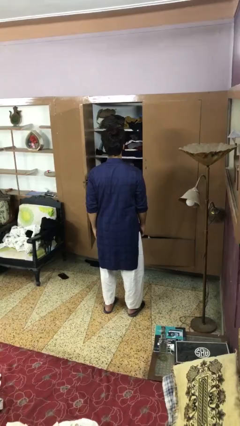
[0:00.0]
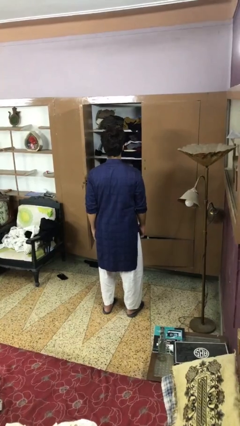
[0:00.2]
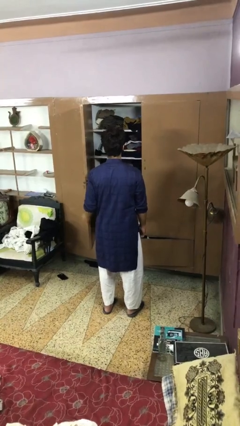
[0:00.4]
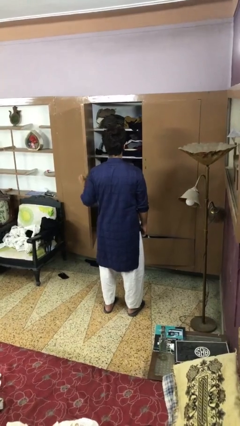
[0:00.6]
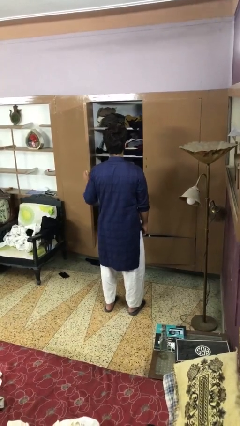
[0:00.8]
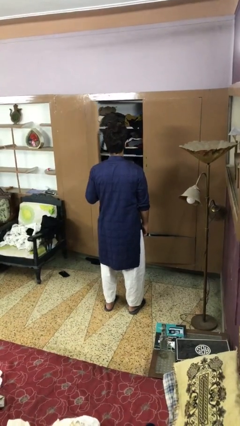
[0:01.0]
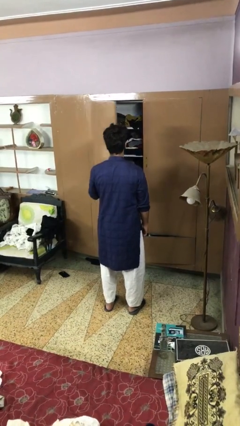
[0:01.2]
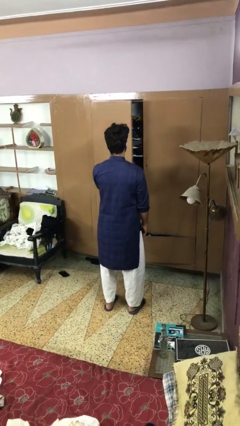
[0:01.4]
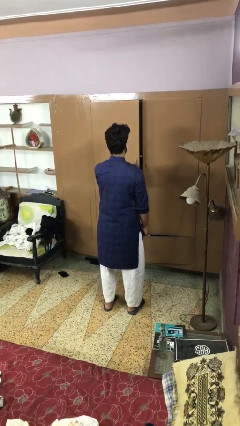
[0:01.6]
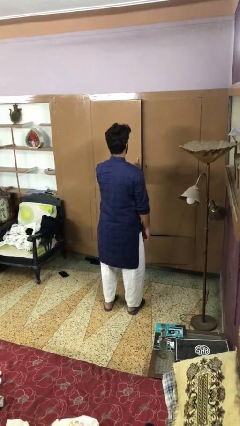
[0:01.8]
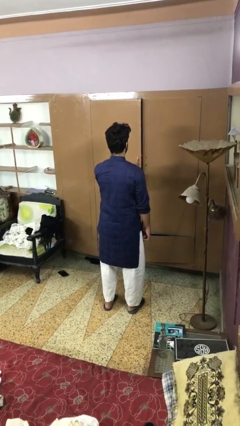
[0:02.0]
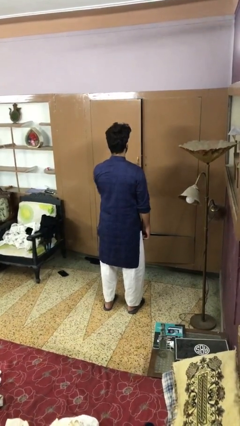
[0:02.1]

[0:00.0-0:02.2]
person closes closet door

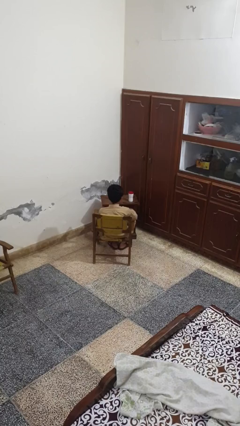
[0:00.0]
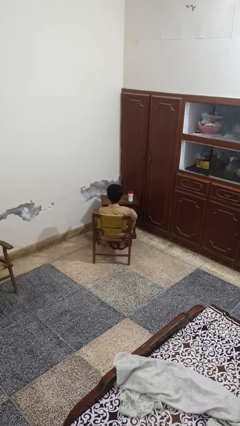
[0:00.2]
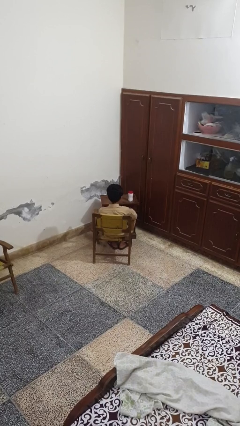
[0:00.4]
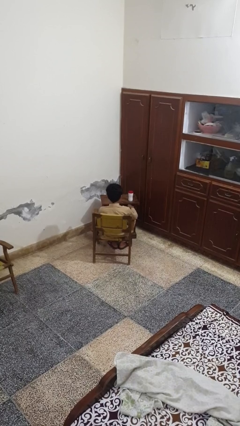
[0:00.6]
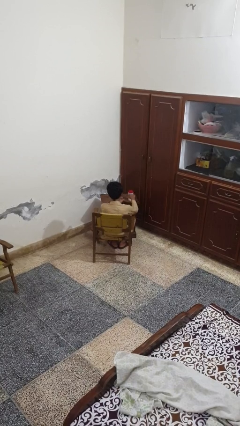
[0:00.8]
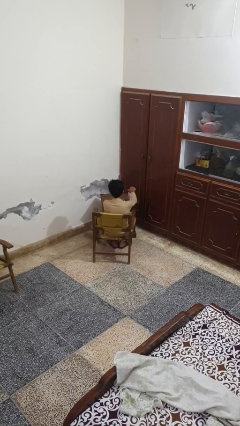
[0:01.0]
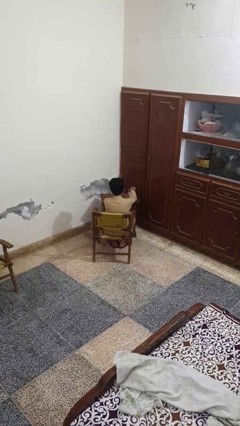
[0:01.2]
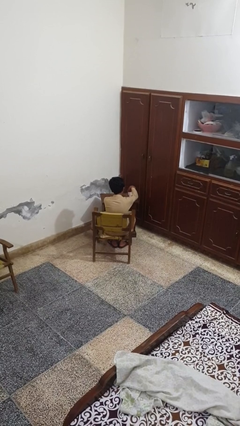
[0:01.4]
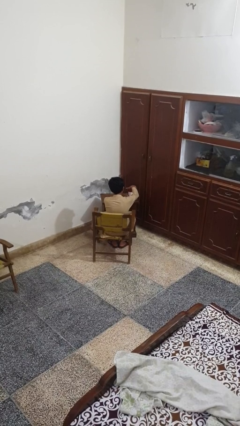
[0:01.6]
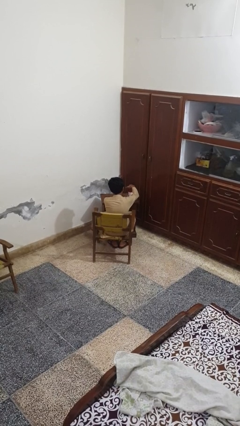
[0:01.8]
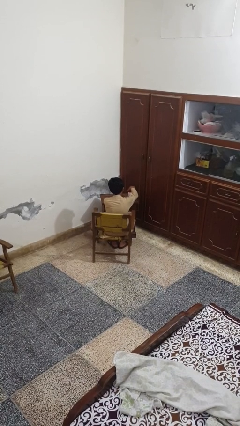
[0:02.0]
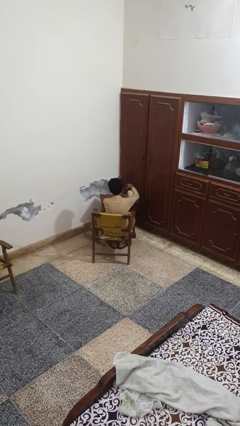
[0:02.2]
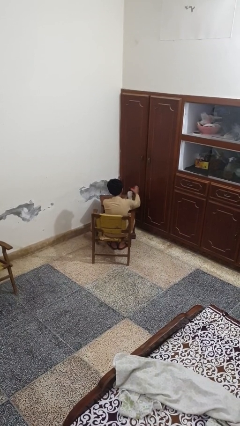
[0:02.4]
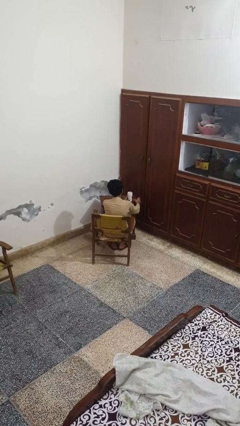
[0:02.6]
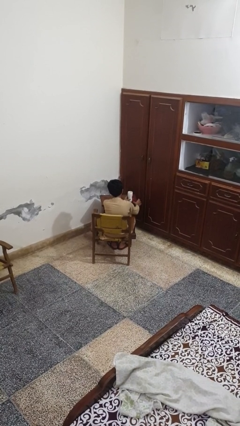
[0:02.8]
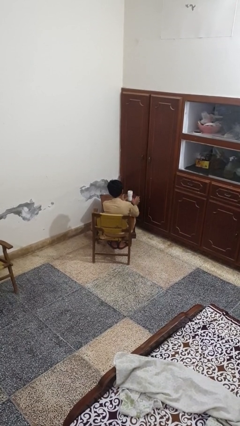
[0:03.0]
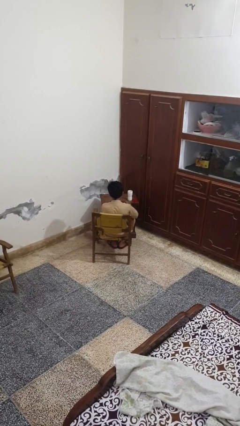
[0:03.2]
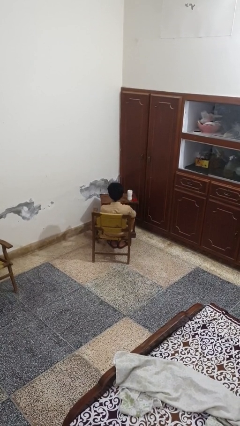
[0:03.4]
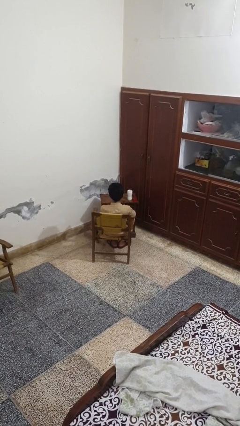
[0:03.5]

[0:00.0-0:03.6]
person opens jar

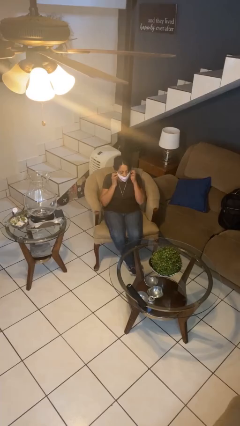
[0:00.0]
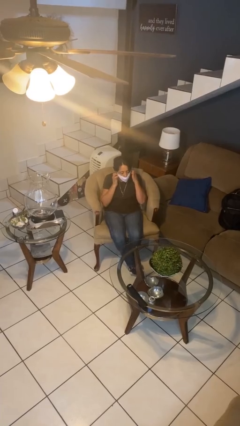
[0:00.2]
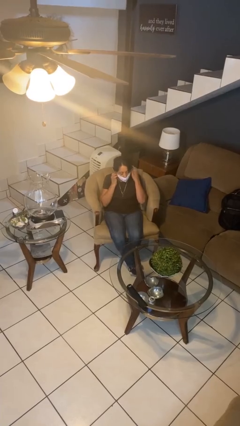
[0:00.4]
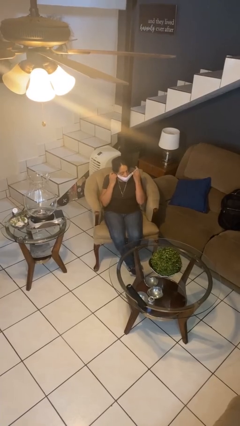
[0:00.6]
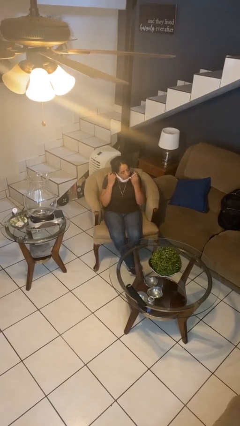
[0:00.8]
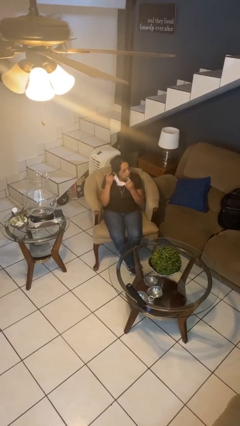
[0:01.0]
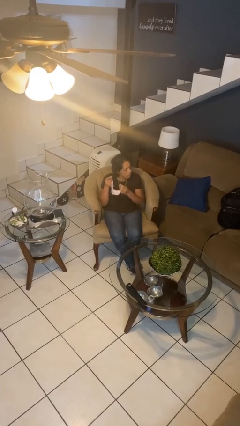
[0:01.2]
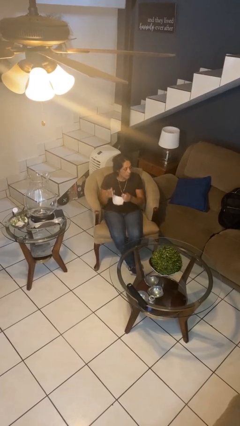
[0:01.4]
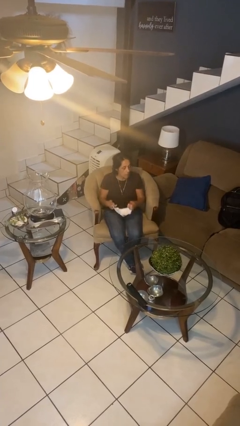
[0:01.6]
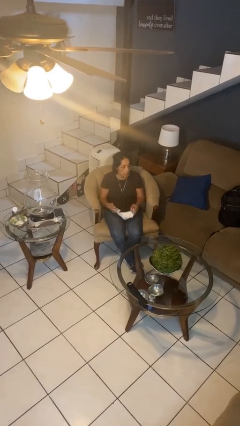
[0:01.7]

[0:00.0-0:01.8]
person takes off facemask

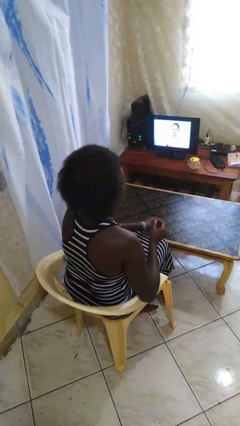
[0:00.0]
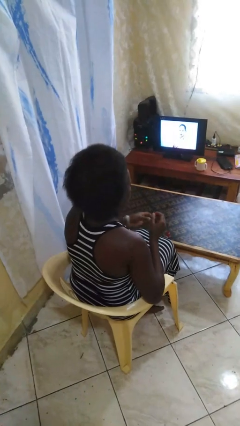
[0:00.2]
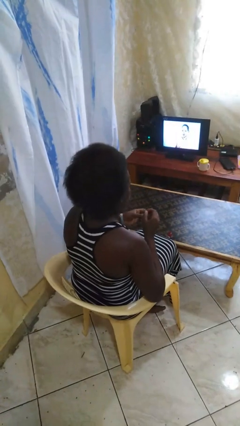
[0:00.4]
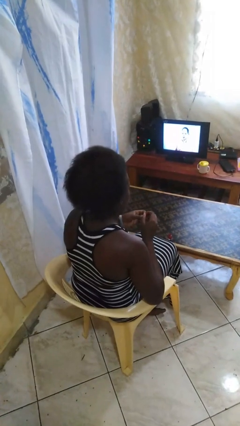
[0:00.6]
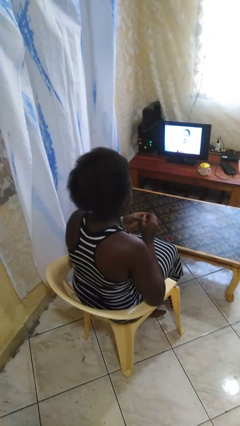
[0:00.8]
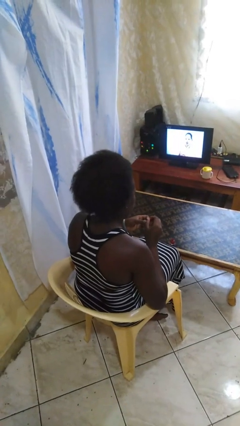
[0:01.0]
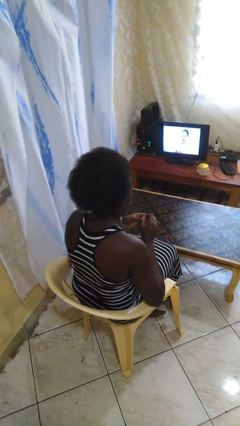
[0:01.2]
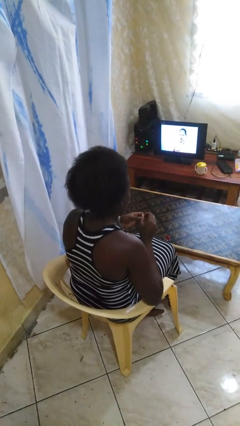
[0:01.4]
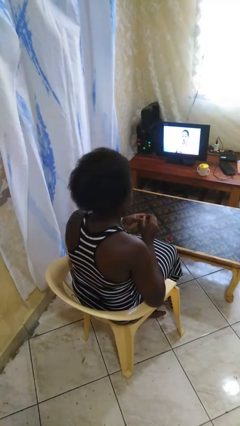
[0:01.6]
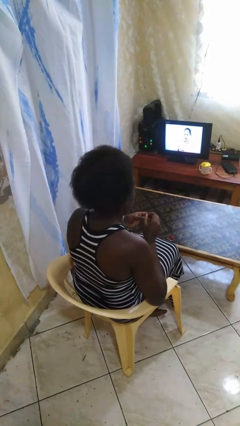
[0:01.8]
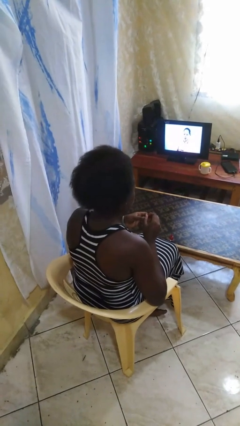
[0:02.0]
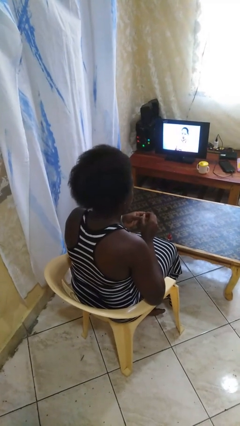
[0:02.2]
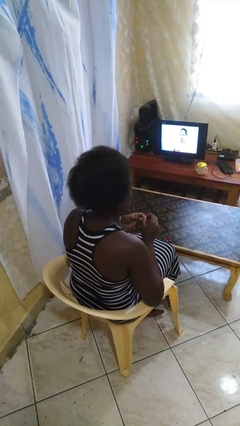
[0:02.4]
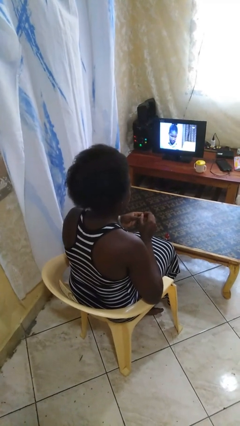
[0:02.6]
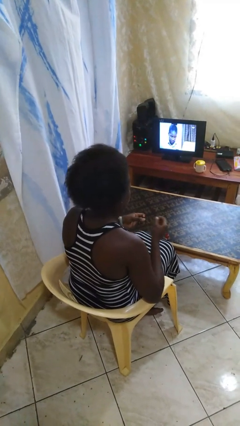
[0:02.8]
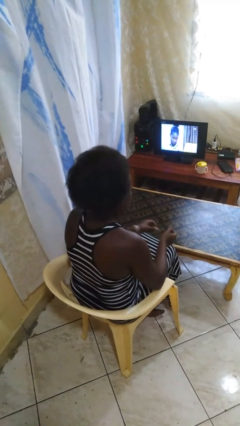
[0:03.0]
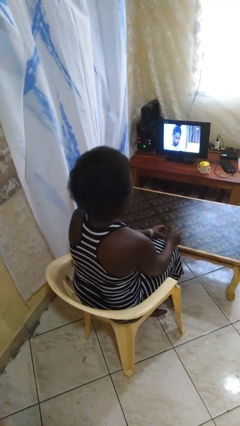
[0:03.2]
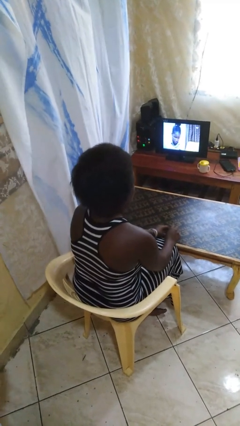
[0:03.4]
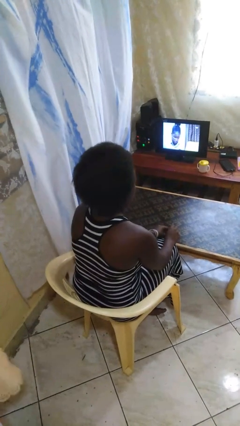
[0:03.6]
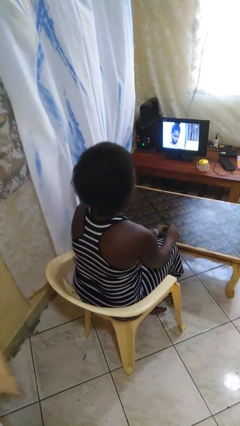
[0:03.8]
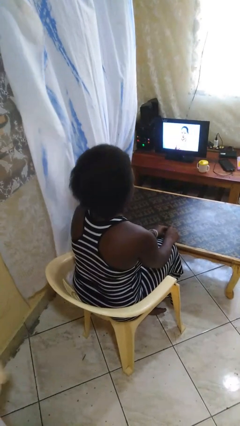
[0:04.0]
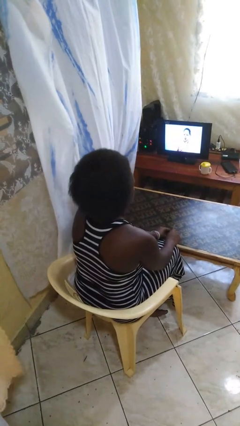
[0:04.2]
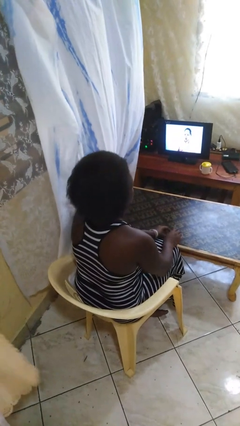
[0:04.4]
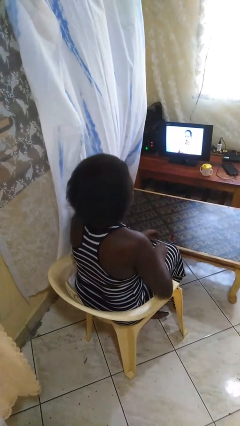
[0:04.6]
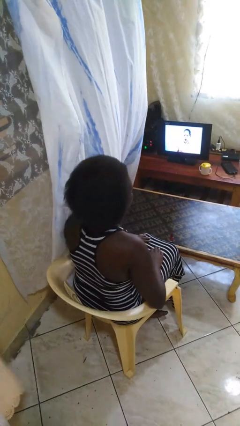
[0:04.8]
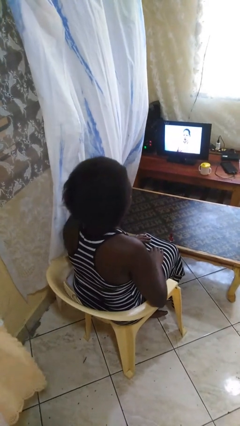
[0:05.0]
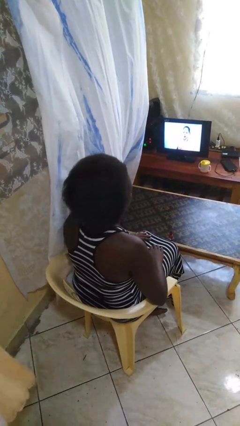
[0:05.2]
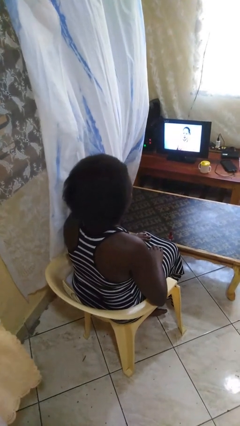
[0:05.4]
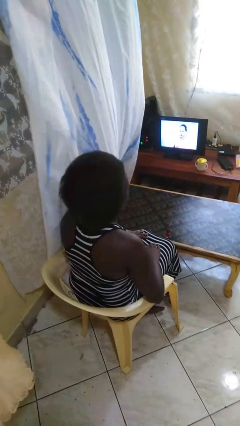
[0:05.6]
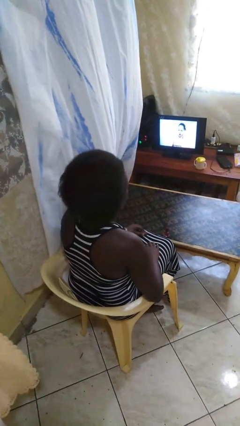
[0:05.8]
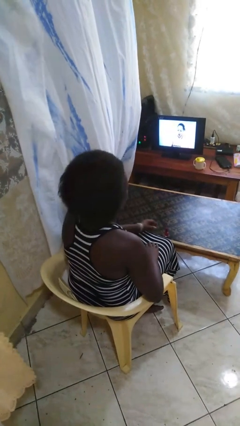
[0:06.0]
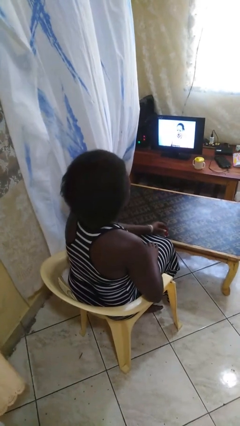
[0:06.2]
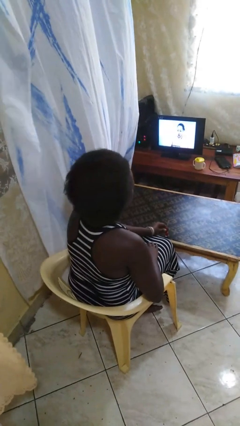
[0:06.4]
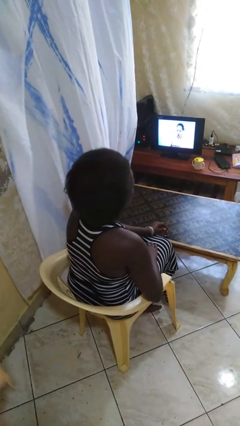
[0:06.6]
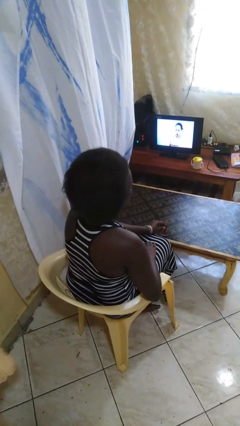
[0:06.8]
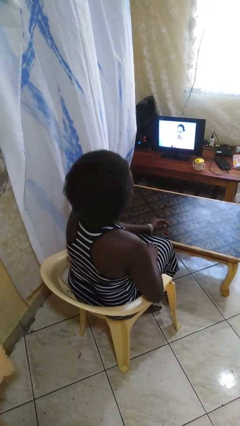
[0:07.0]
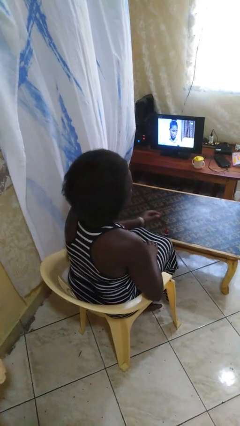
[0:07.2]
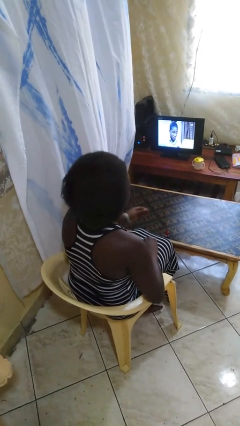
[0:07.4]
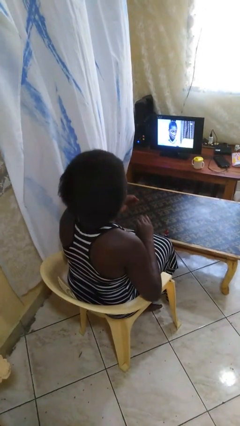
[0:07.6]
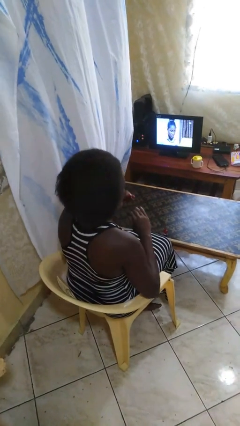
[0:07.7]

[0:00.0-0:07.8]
person paints fingernails

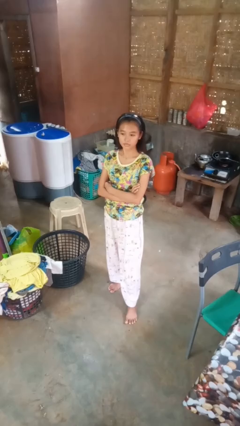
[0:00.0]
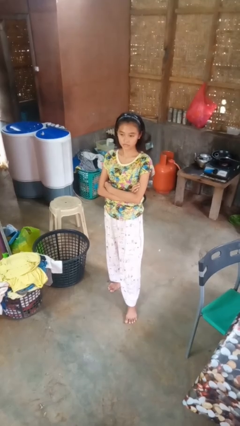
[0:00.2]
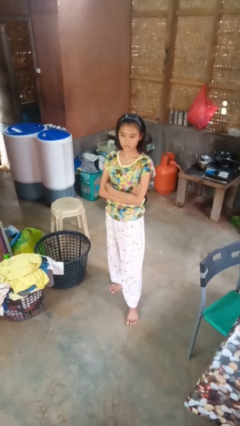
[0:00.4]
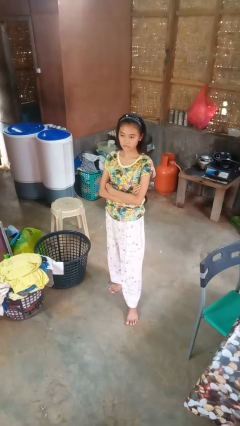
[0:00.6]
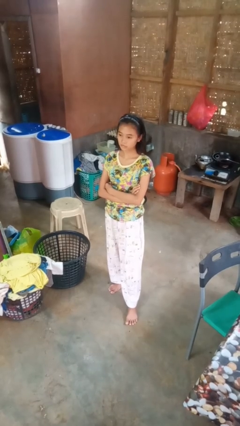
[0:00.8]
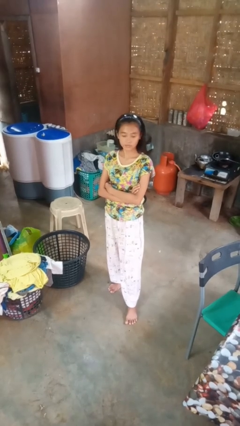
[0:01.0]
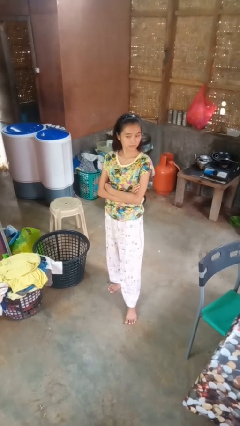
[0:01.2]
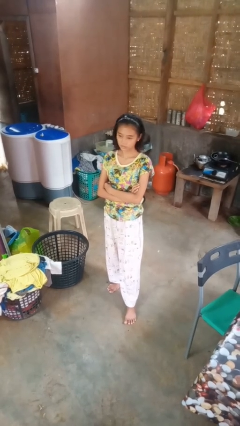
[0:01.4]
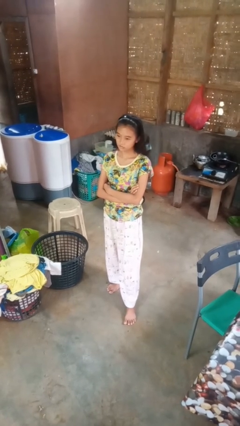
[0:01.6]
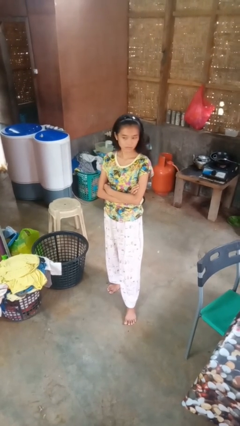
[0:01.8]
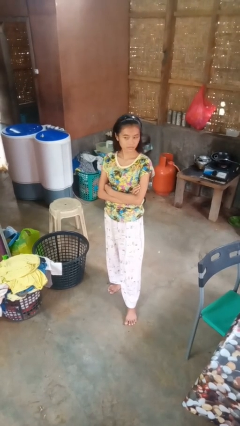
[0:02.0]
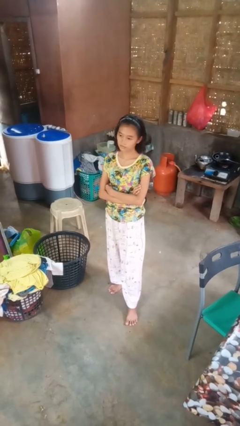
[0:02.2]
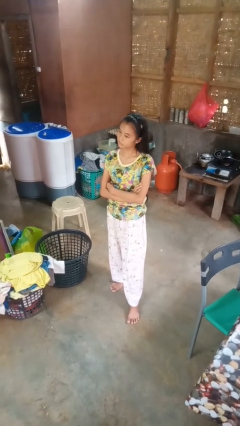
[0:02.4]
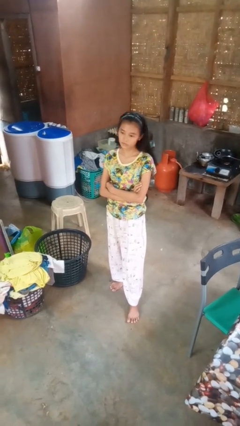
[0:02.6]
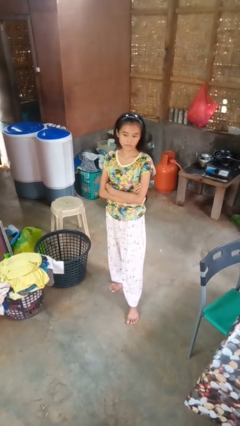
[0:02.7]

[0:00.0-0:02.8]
person shakes head
